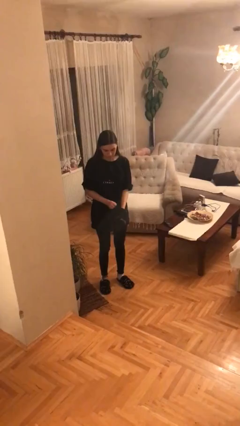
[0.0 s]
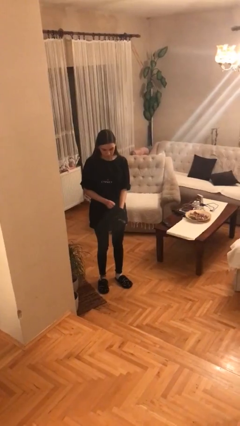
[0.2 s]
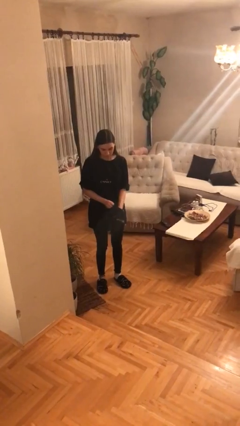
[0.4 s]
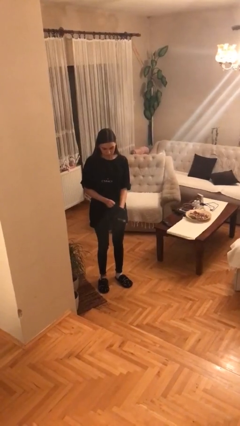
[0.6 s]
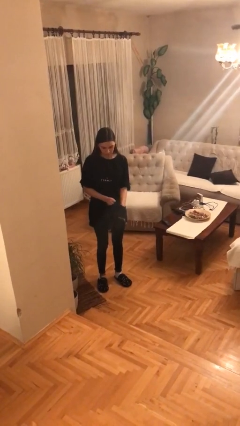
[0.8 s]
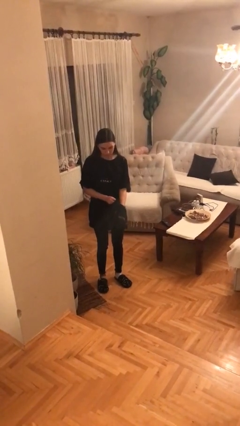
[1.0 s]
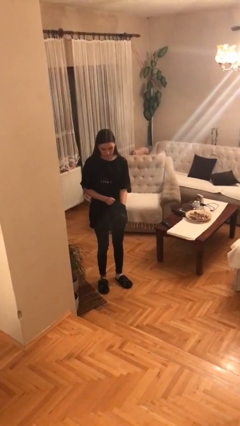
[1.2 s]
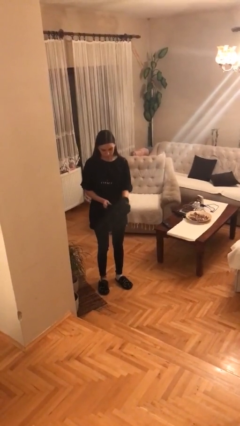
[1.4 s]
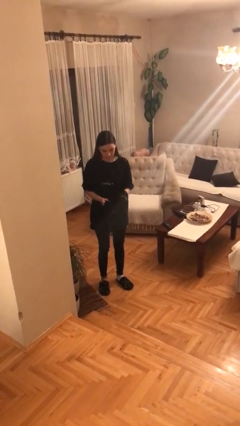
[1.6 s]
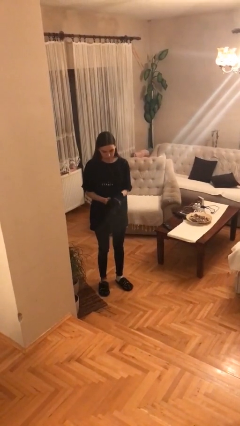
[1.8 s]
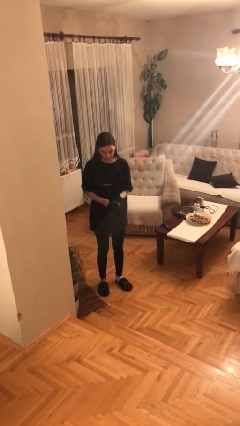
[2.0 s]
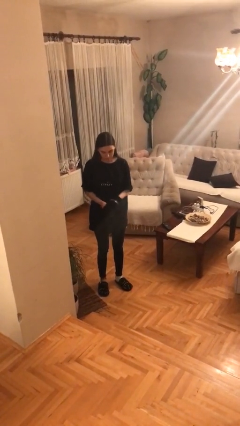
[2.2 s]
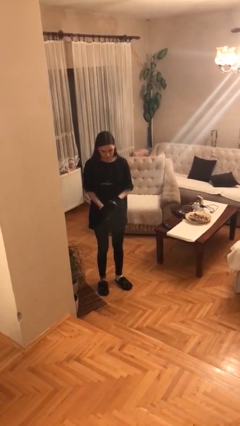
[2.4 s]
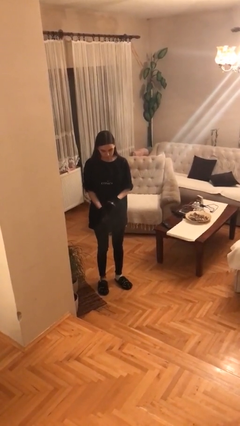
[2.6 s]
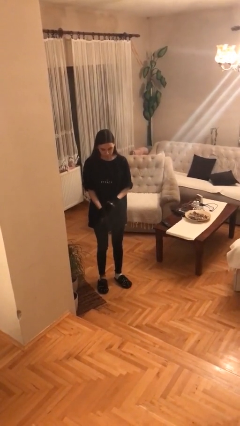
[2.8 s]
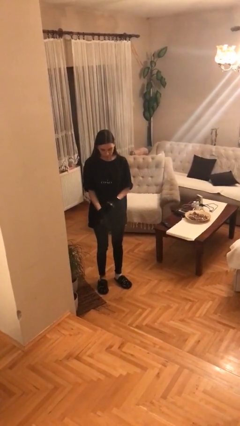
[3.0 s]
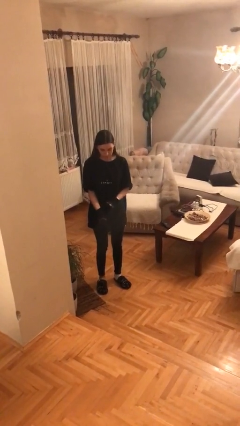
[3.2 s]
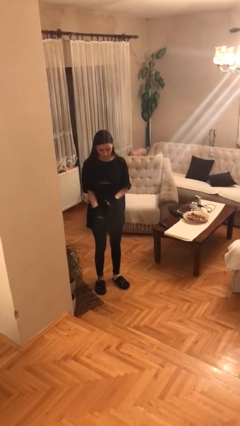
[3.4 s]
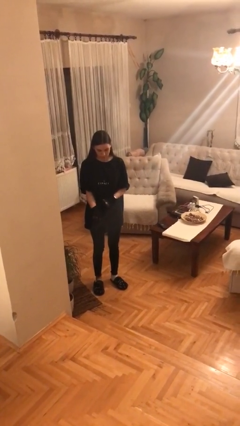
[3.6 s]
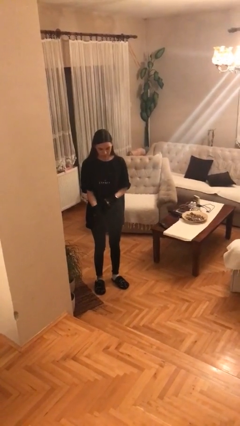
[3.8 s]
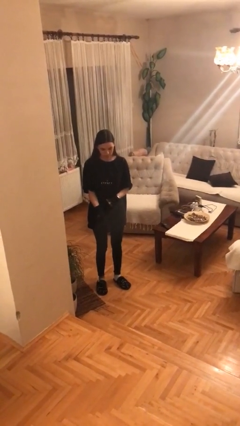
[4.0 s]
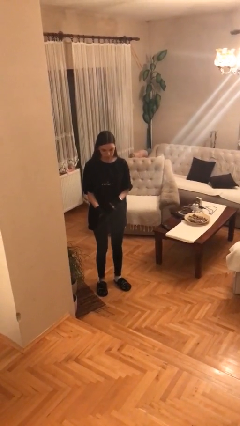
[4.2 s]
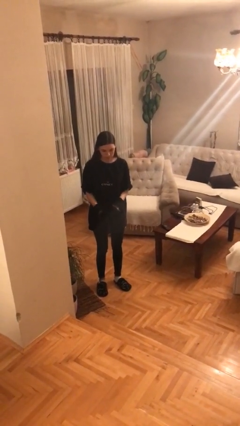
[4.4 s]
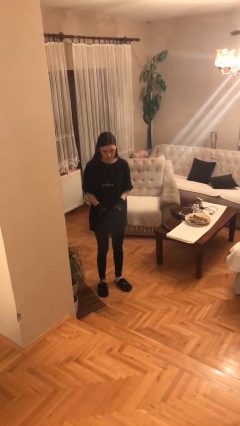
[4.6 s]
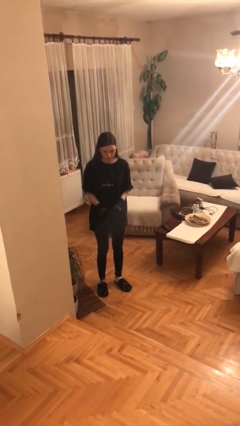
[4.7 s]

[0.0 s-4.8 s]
person puts on gloves

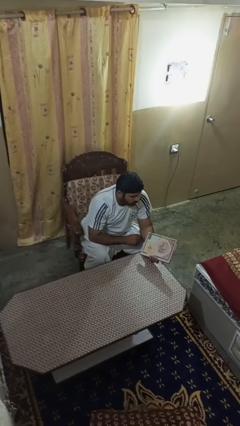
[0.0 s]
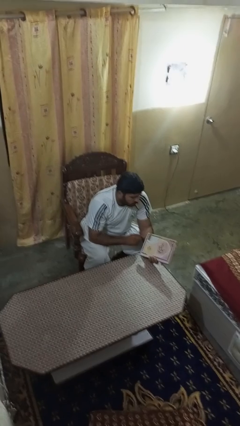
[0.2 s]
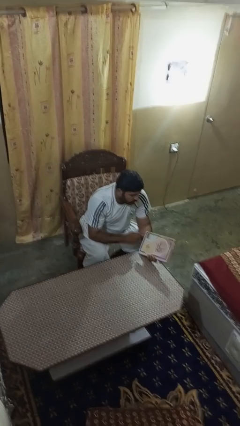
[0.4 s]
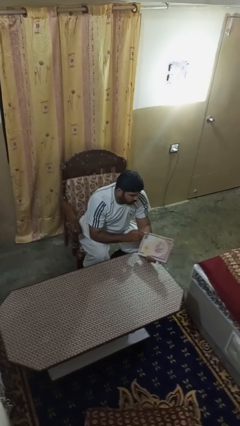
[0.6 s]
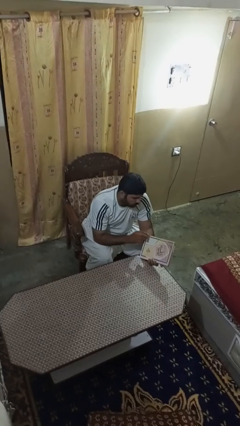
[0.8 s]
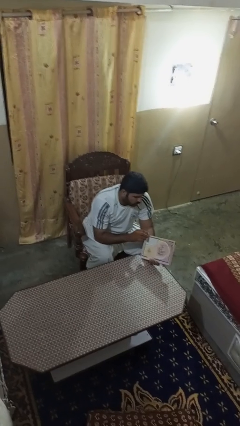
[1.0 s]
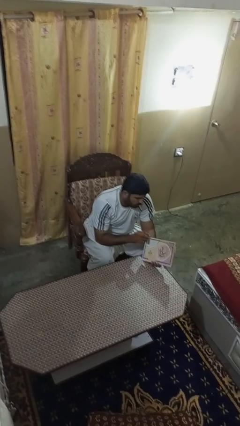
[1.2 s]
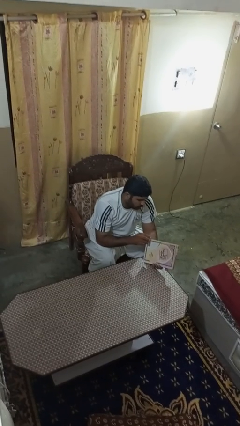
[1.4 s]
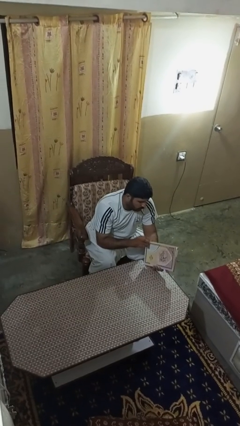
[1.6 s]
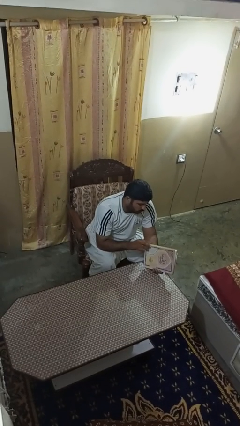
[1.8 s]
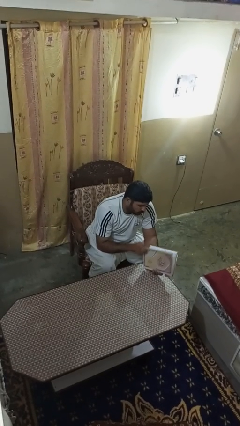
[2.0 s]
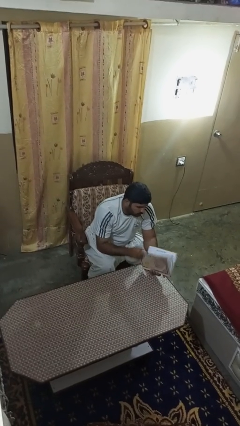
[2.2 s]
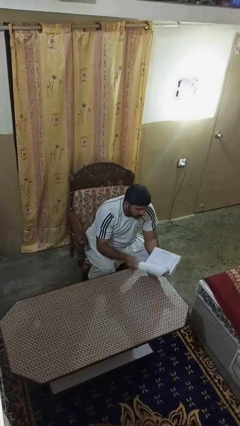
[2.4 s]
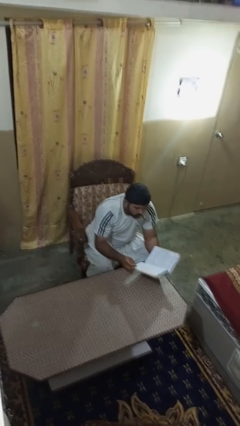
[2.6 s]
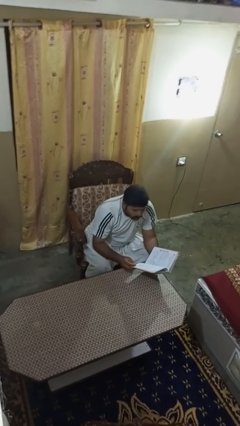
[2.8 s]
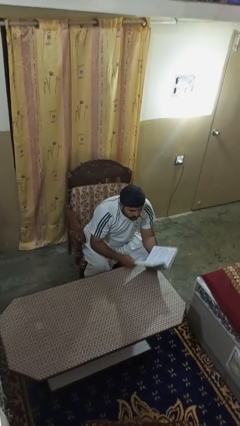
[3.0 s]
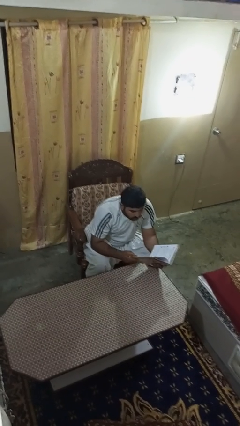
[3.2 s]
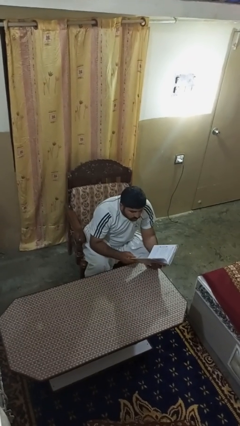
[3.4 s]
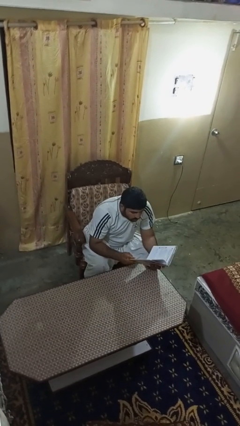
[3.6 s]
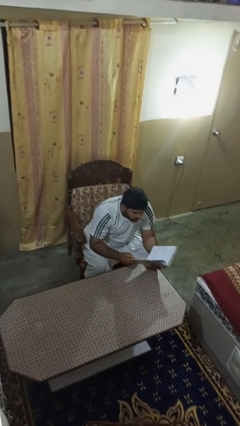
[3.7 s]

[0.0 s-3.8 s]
person reads book

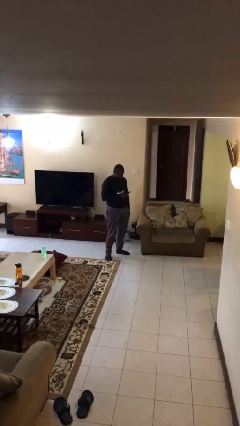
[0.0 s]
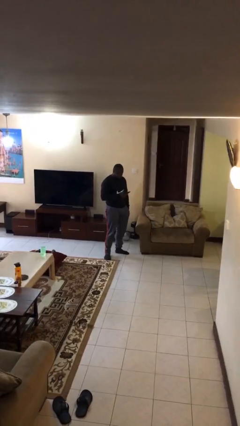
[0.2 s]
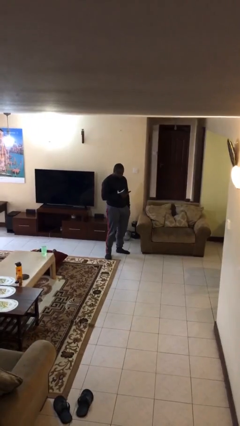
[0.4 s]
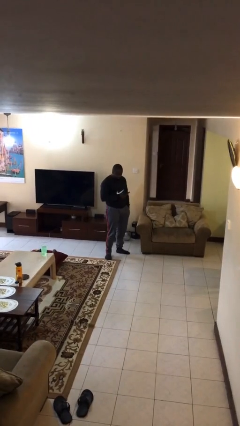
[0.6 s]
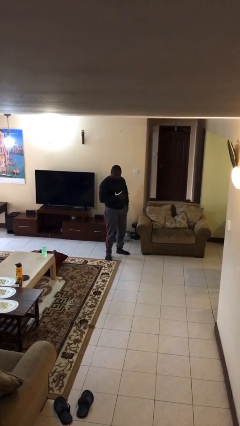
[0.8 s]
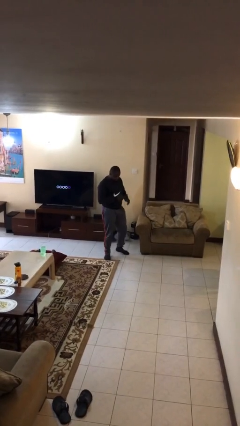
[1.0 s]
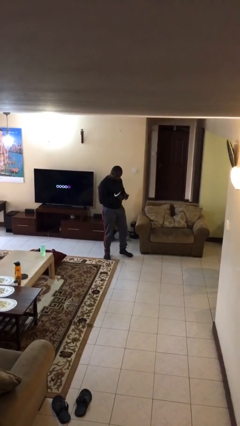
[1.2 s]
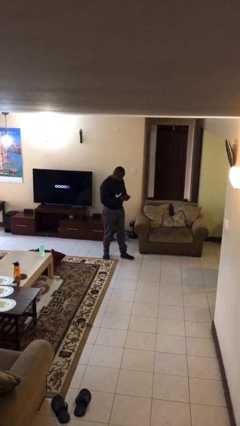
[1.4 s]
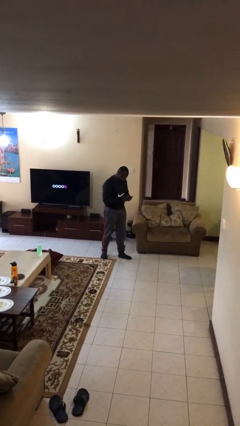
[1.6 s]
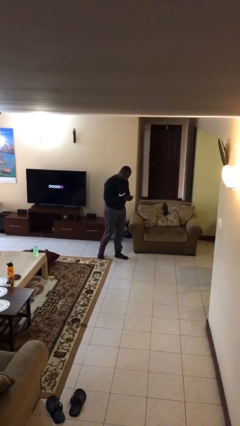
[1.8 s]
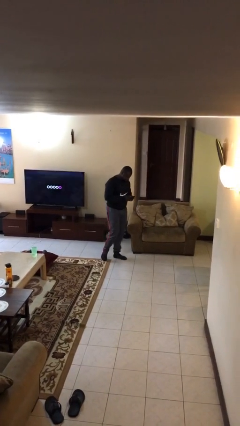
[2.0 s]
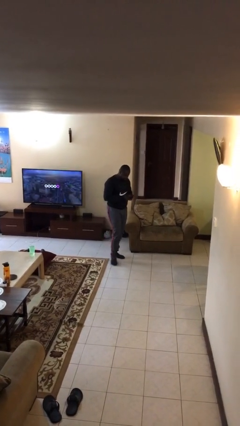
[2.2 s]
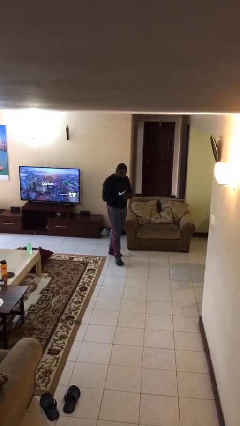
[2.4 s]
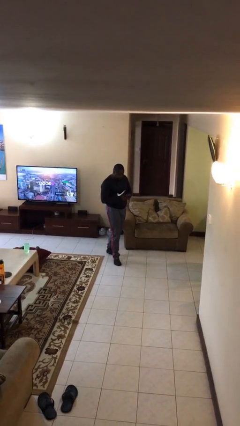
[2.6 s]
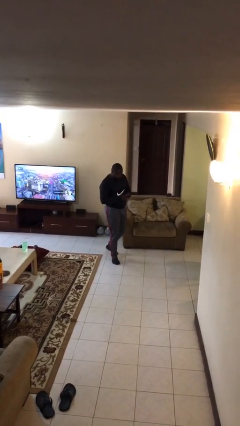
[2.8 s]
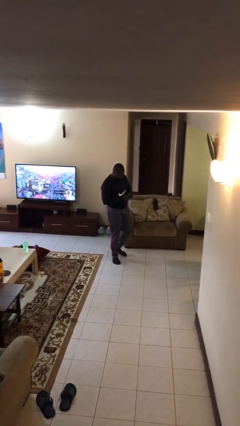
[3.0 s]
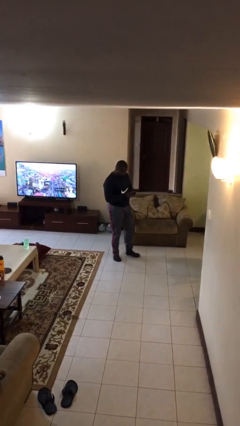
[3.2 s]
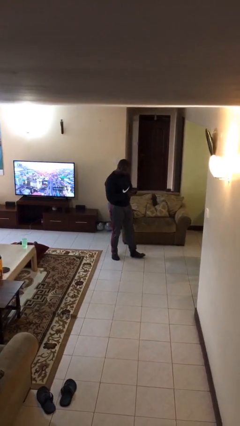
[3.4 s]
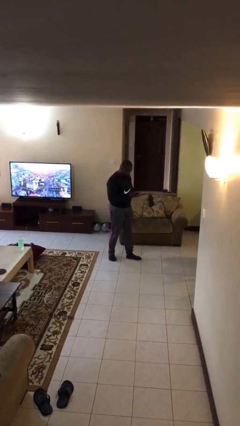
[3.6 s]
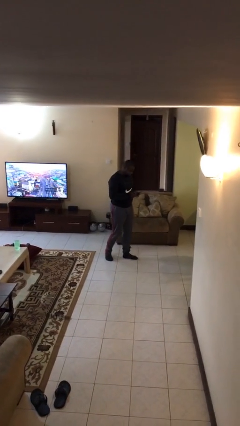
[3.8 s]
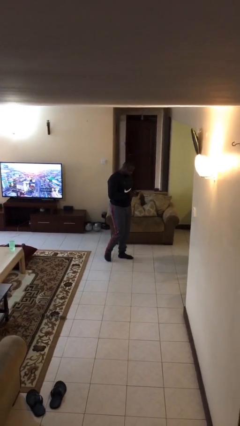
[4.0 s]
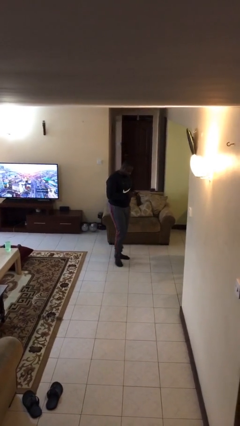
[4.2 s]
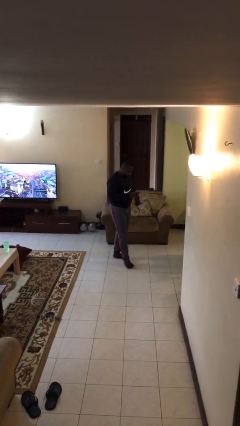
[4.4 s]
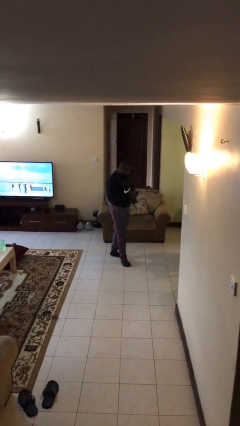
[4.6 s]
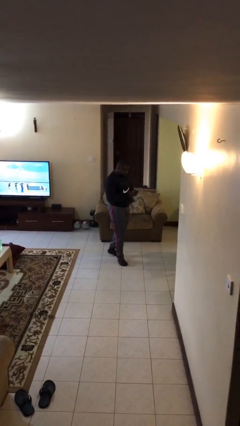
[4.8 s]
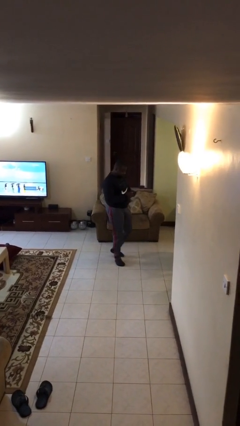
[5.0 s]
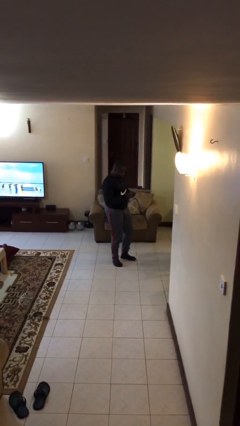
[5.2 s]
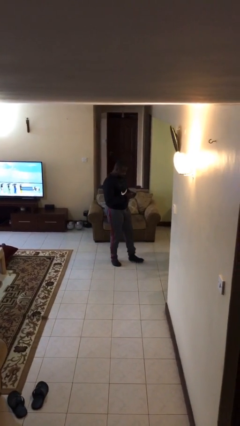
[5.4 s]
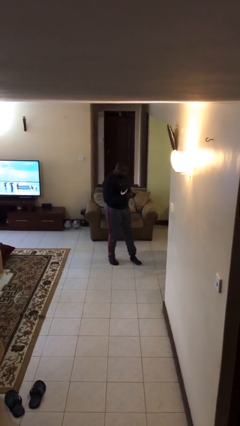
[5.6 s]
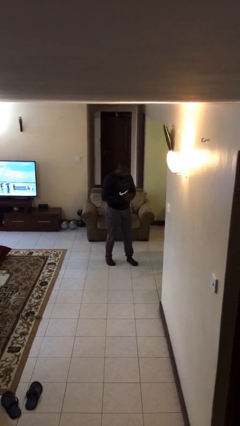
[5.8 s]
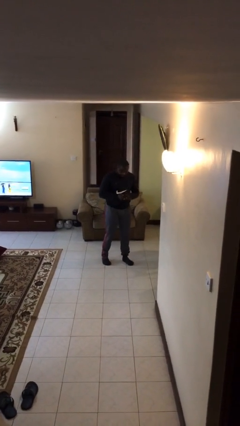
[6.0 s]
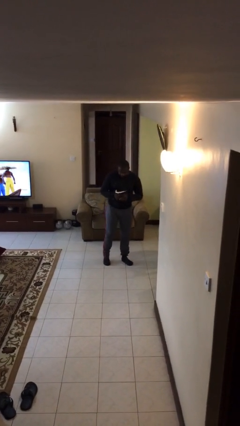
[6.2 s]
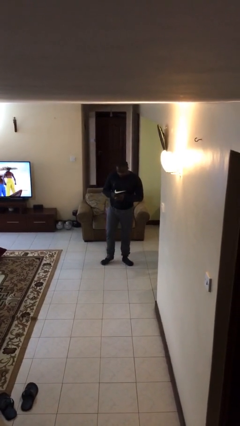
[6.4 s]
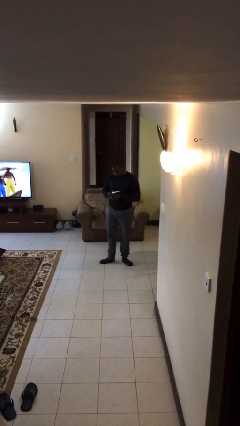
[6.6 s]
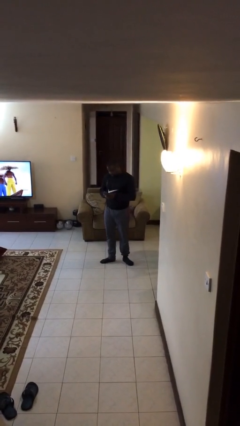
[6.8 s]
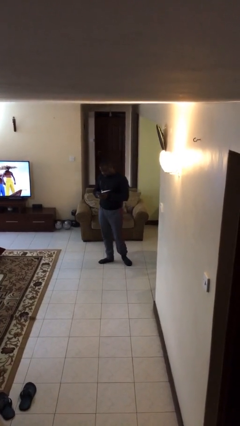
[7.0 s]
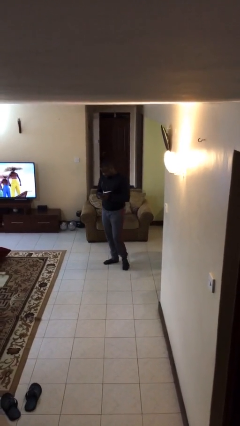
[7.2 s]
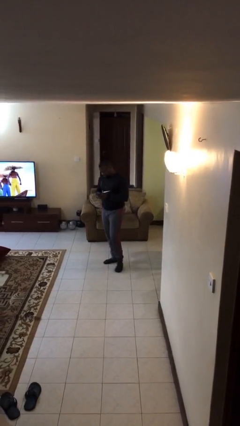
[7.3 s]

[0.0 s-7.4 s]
person texts on phone

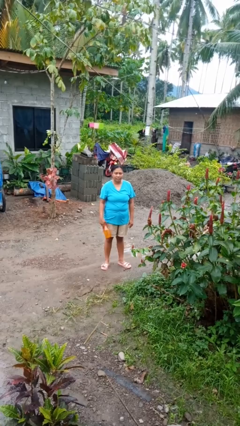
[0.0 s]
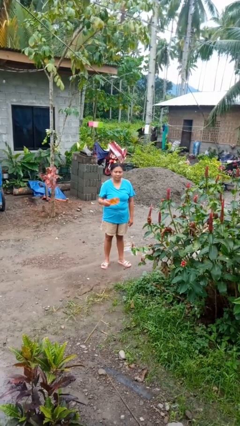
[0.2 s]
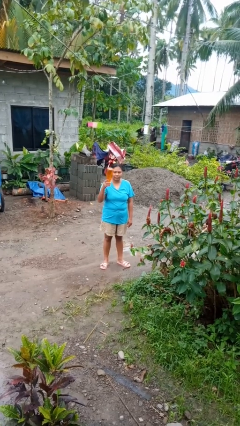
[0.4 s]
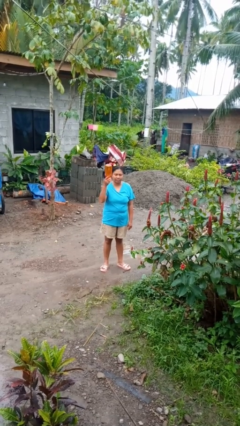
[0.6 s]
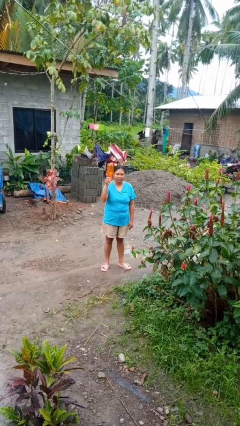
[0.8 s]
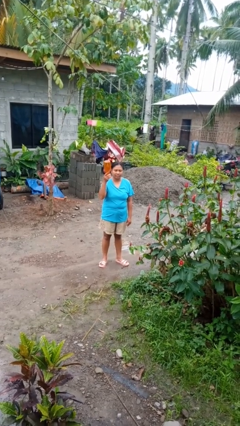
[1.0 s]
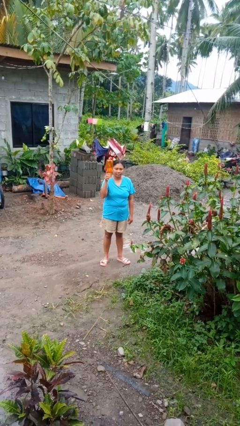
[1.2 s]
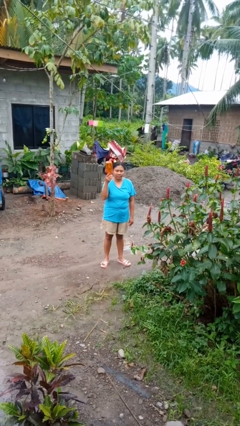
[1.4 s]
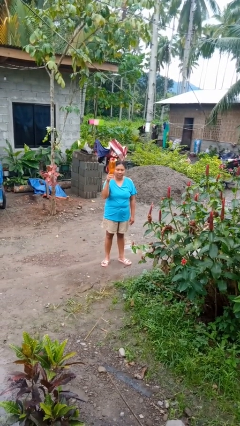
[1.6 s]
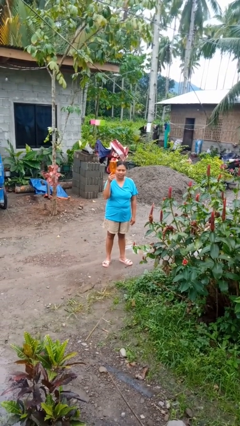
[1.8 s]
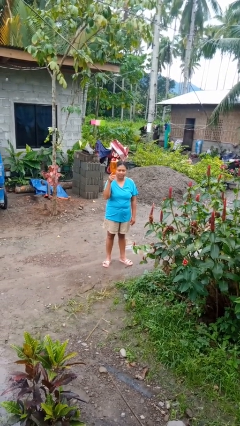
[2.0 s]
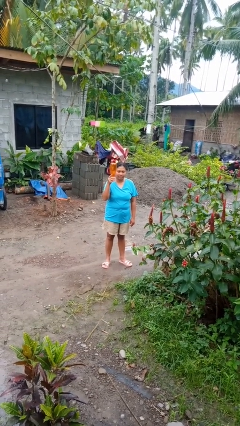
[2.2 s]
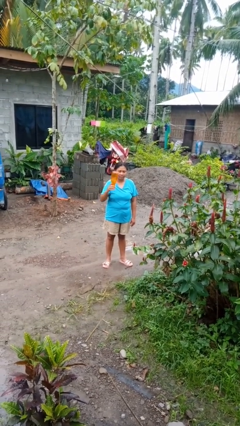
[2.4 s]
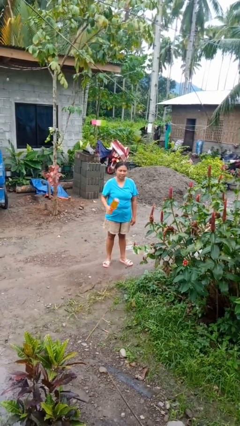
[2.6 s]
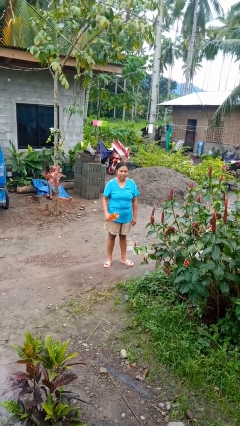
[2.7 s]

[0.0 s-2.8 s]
person holds object above head
